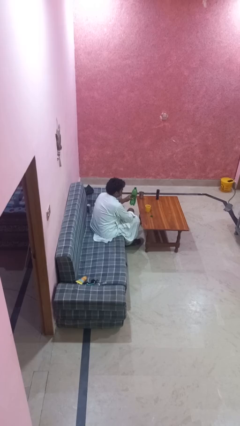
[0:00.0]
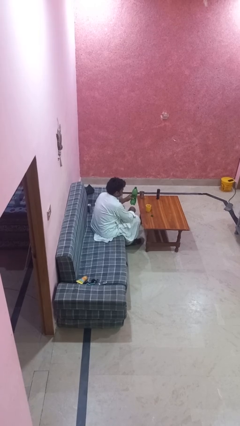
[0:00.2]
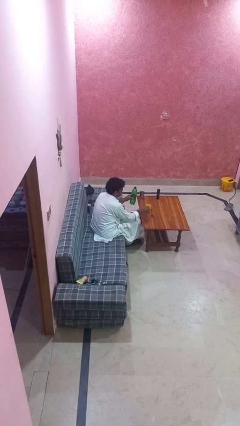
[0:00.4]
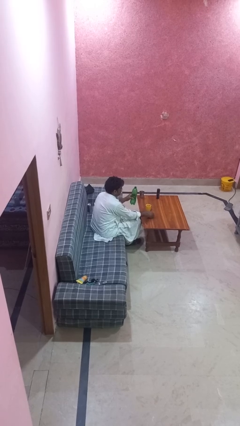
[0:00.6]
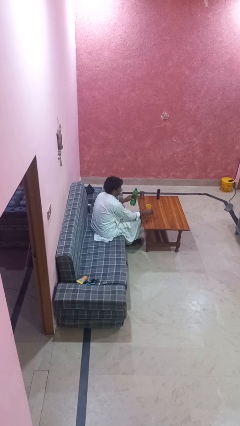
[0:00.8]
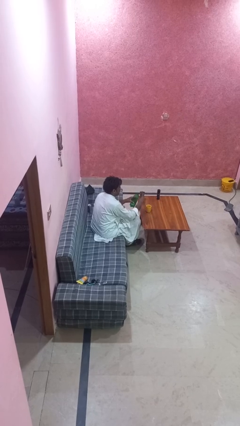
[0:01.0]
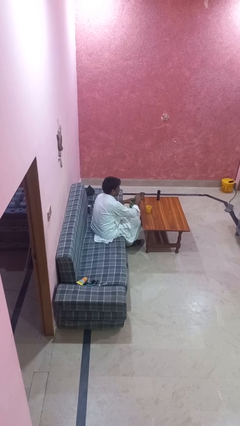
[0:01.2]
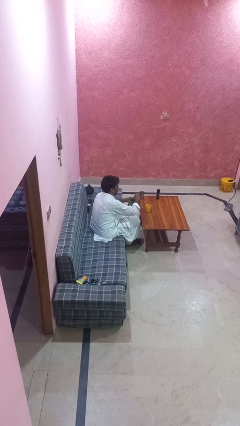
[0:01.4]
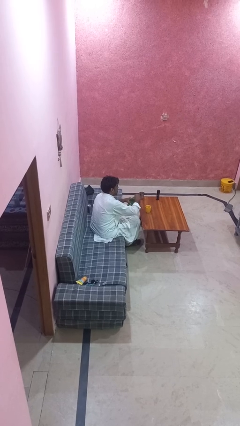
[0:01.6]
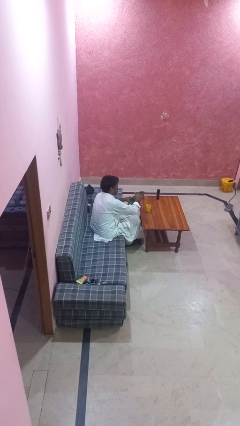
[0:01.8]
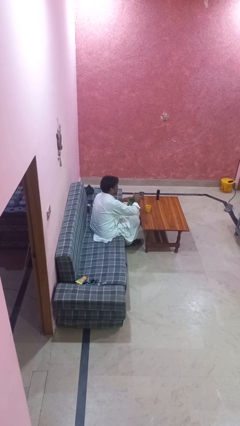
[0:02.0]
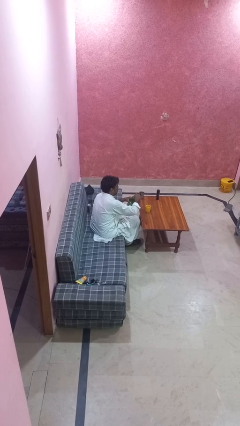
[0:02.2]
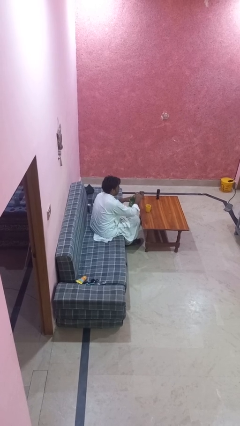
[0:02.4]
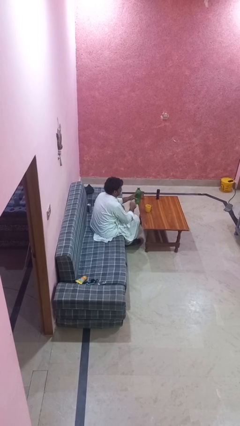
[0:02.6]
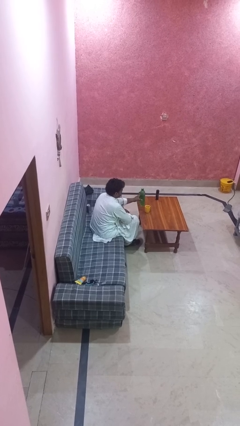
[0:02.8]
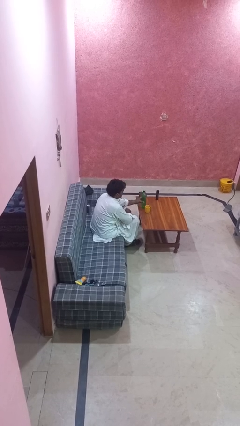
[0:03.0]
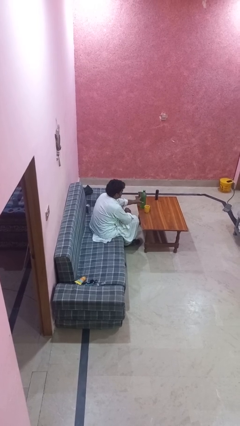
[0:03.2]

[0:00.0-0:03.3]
person screws lid to bottle

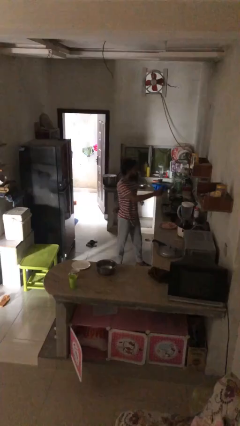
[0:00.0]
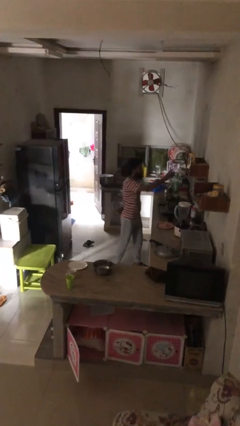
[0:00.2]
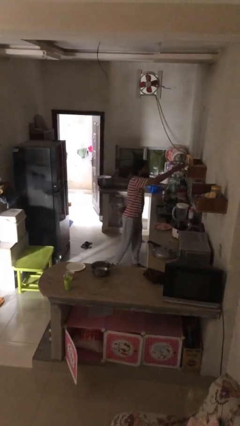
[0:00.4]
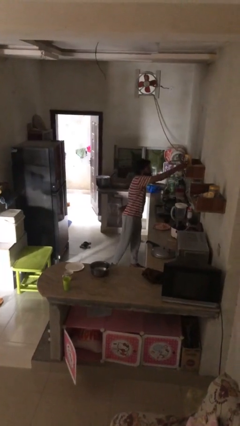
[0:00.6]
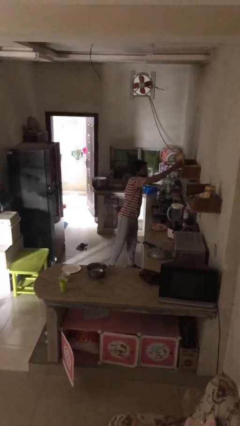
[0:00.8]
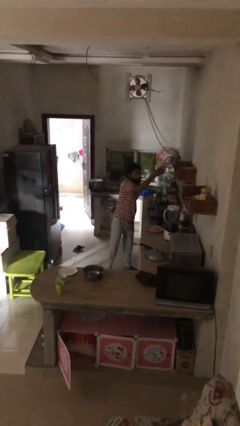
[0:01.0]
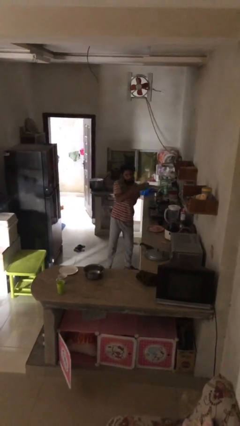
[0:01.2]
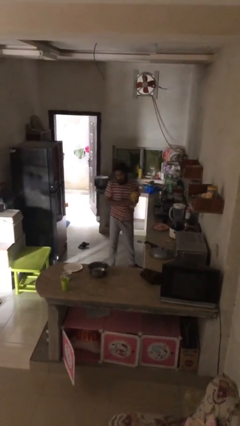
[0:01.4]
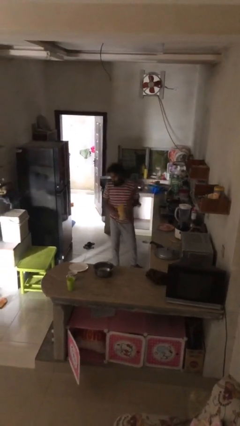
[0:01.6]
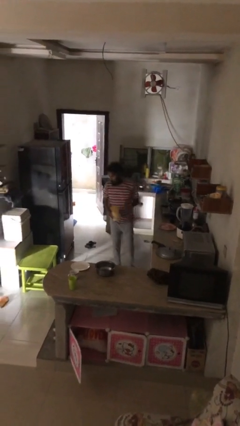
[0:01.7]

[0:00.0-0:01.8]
person picks up object from shelf

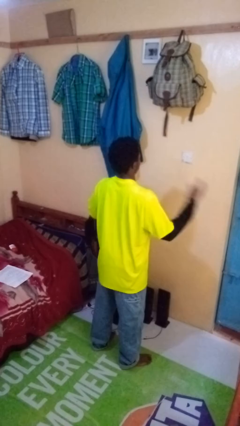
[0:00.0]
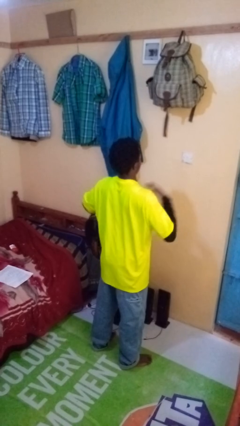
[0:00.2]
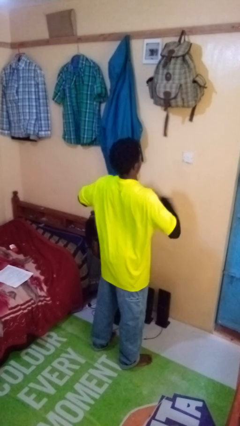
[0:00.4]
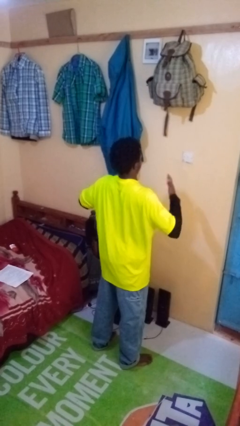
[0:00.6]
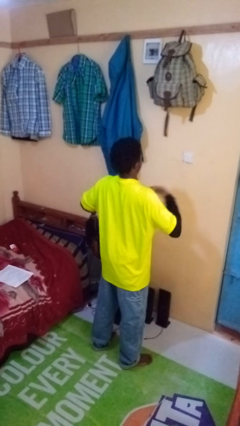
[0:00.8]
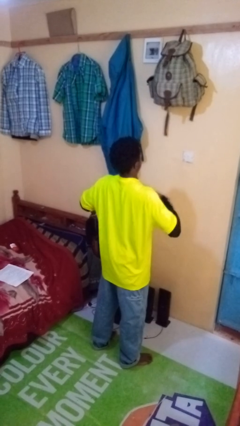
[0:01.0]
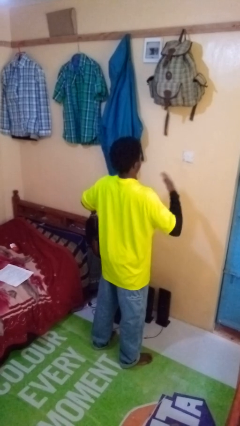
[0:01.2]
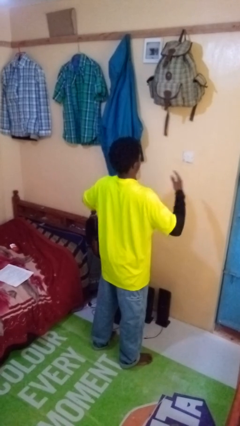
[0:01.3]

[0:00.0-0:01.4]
person drums on chest

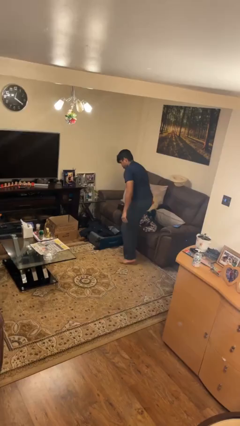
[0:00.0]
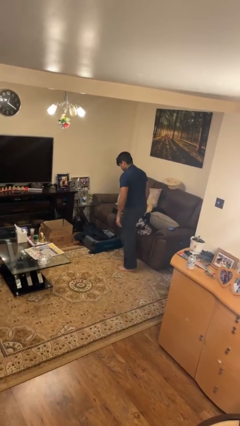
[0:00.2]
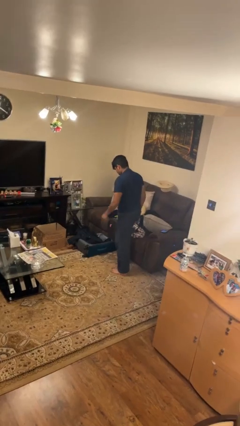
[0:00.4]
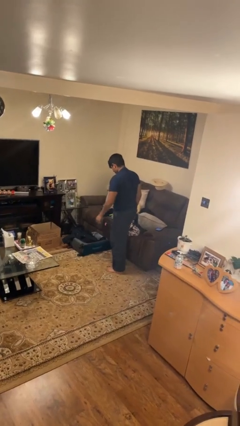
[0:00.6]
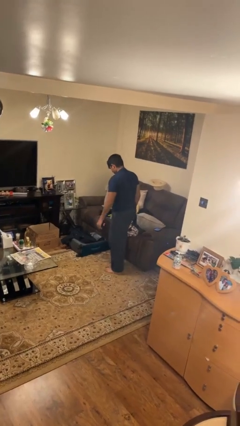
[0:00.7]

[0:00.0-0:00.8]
person loads clothes into suitcase

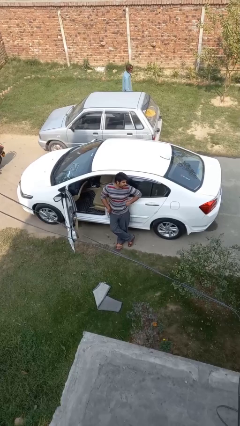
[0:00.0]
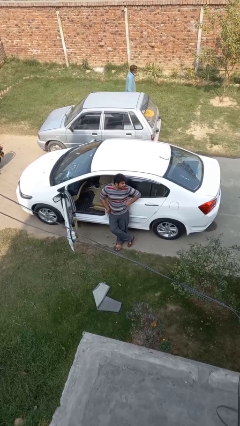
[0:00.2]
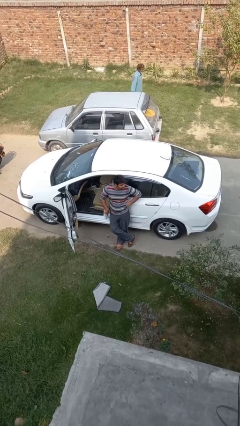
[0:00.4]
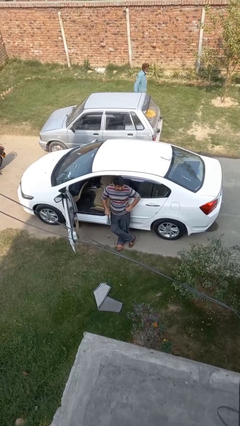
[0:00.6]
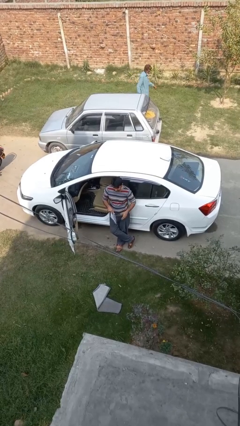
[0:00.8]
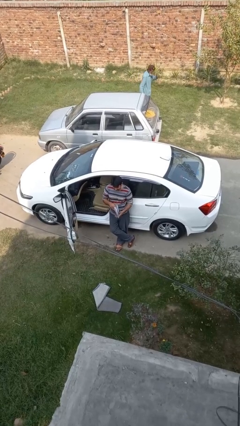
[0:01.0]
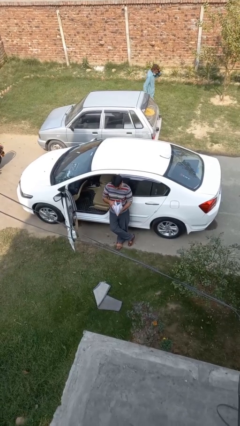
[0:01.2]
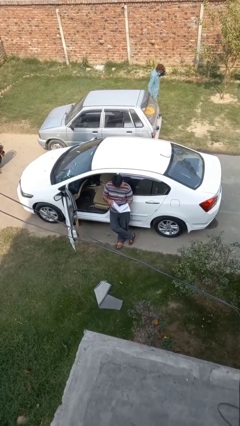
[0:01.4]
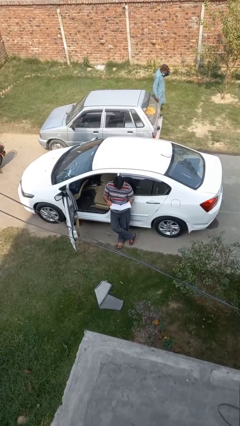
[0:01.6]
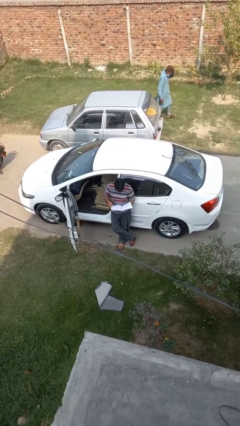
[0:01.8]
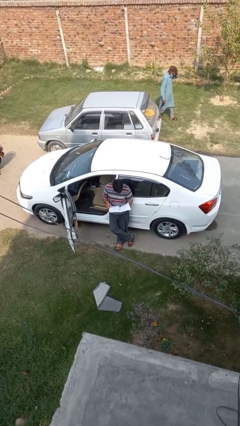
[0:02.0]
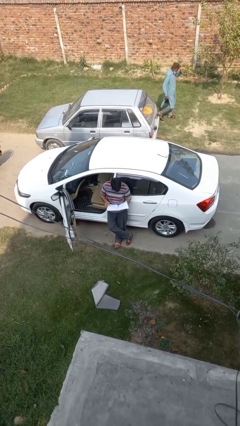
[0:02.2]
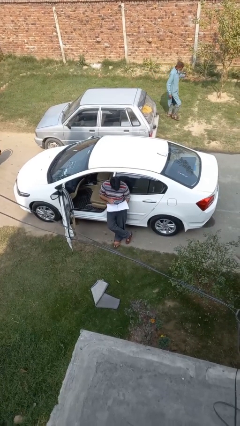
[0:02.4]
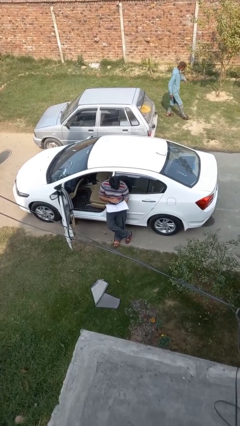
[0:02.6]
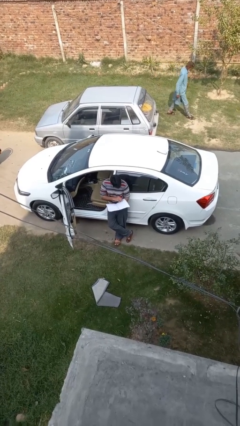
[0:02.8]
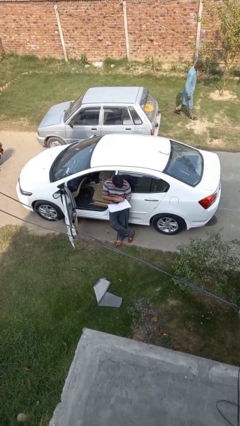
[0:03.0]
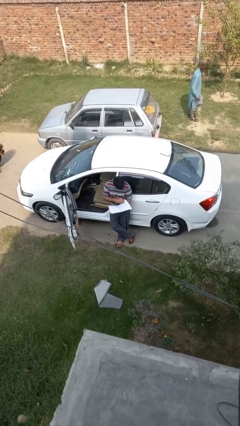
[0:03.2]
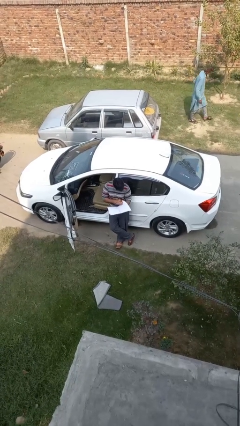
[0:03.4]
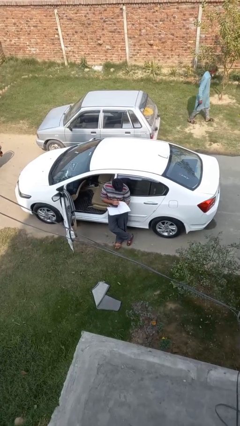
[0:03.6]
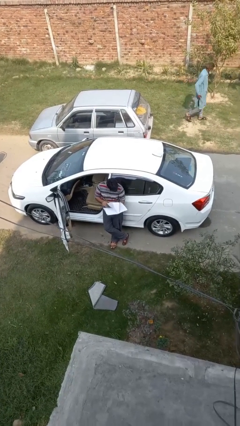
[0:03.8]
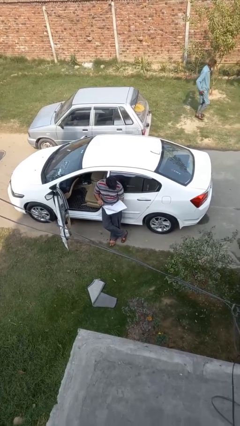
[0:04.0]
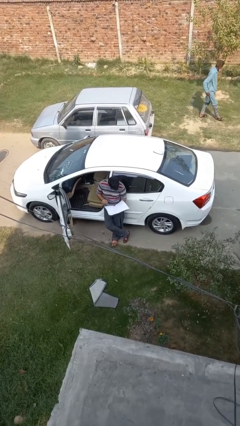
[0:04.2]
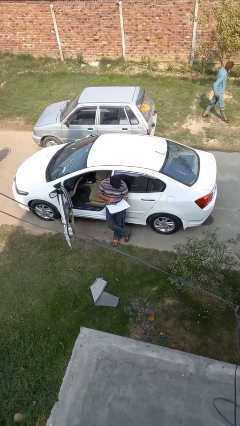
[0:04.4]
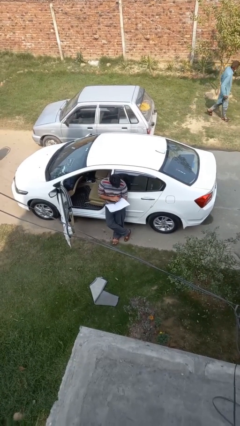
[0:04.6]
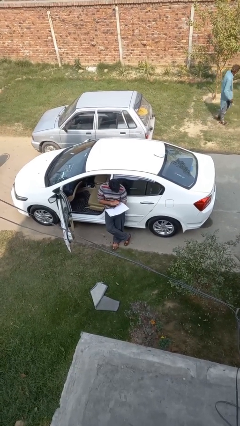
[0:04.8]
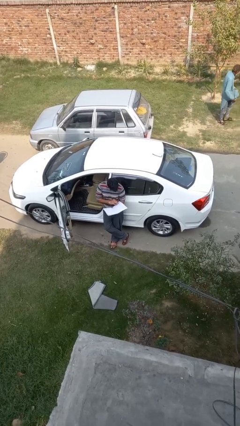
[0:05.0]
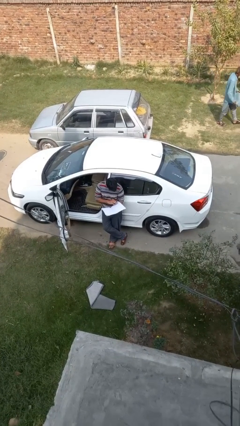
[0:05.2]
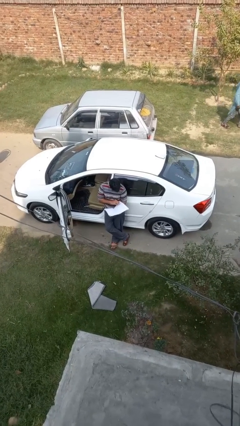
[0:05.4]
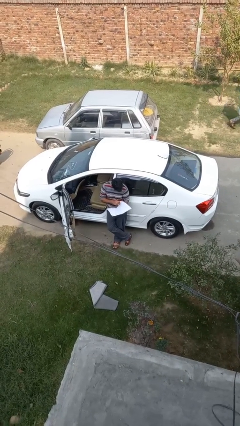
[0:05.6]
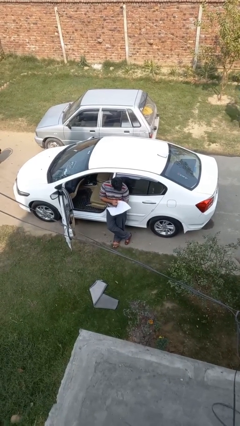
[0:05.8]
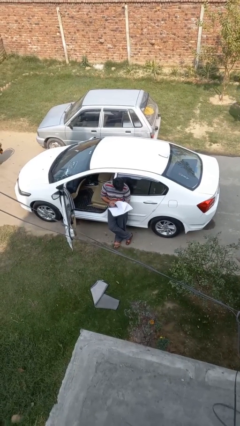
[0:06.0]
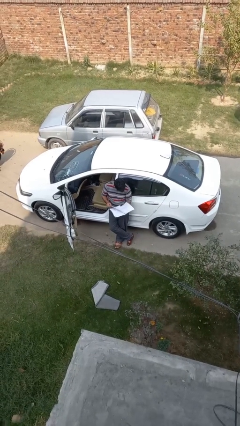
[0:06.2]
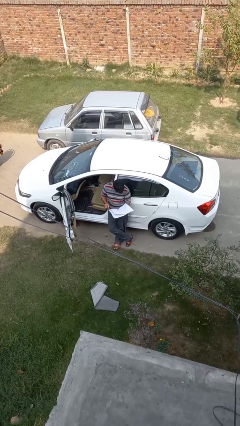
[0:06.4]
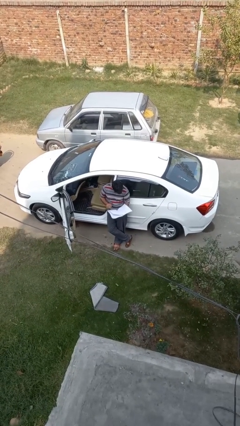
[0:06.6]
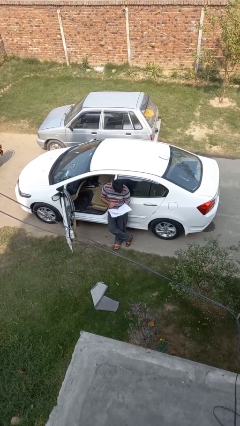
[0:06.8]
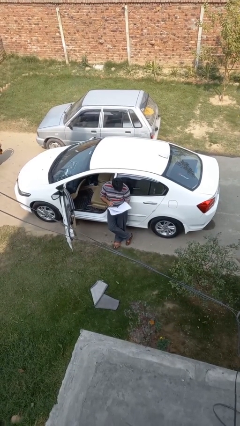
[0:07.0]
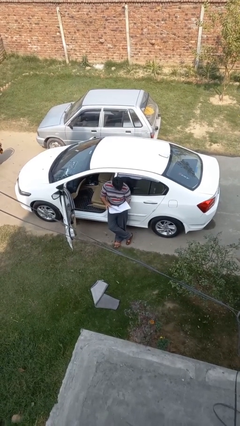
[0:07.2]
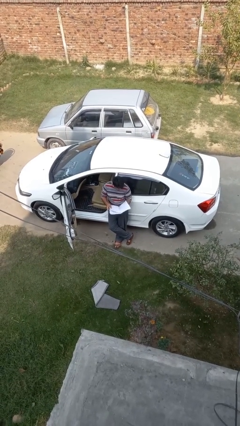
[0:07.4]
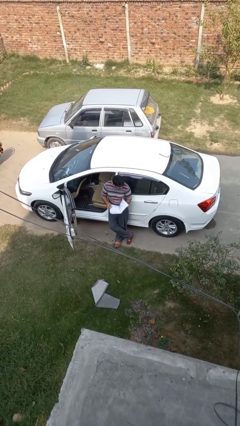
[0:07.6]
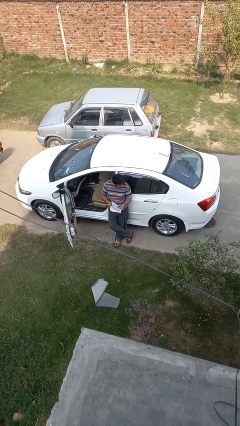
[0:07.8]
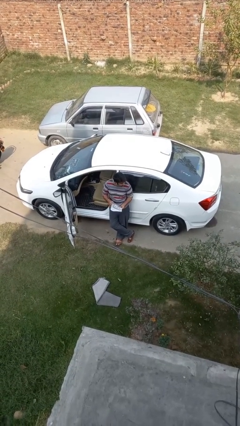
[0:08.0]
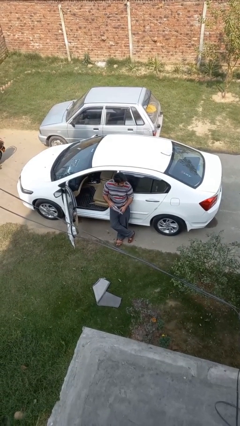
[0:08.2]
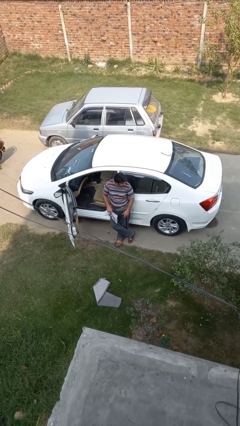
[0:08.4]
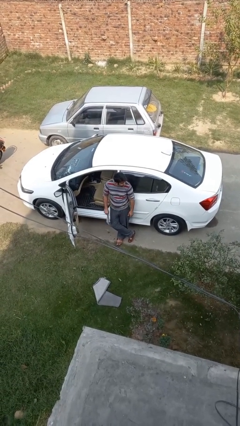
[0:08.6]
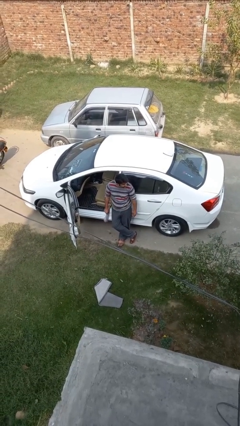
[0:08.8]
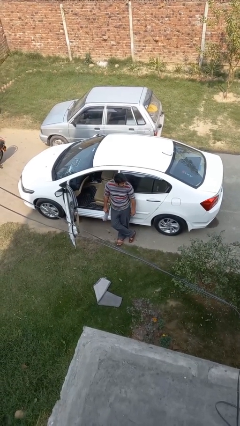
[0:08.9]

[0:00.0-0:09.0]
person reads document

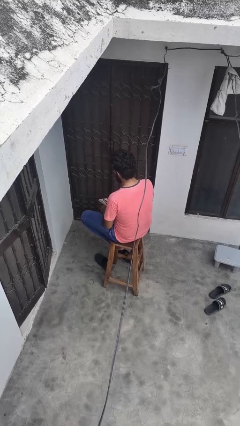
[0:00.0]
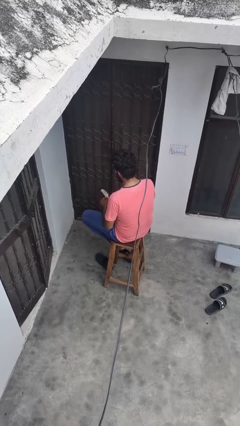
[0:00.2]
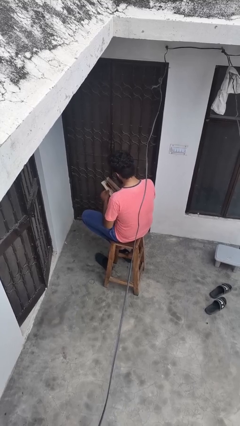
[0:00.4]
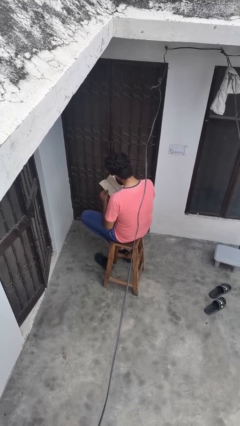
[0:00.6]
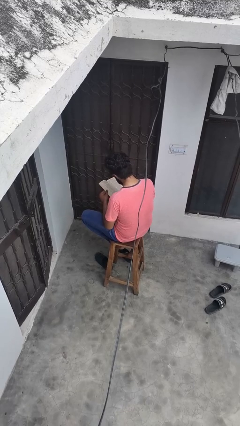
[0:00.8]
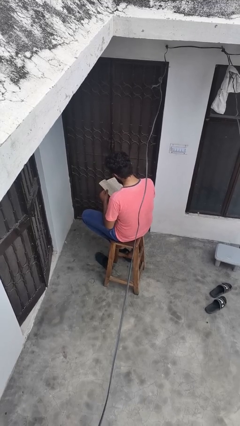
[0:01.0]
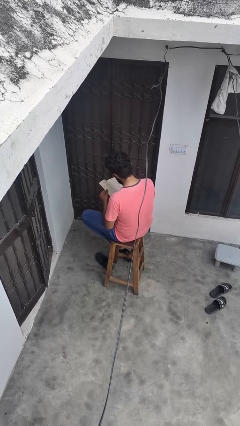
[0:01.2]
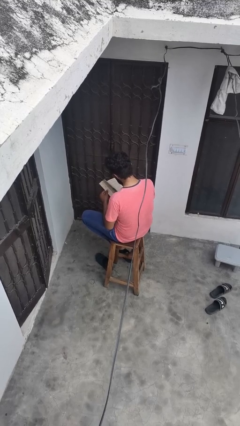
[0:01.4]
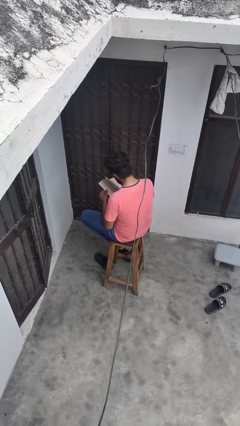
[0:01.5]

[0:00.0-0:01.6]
person reads book
